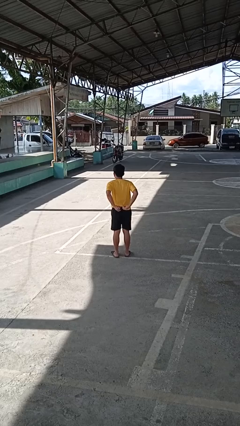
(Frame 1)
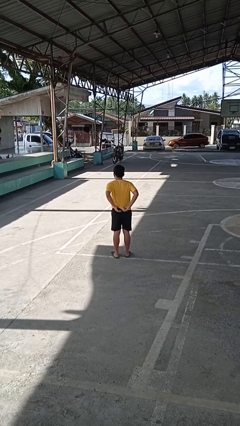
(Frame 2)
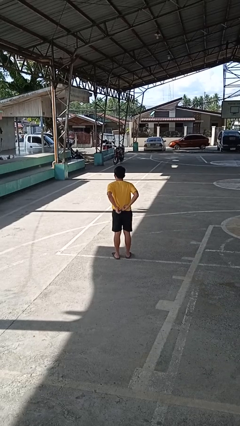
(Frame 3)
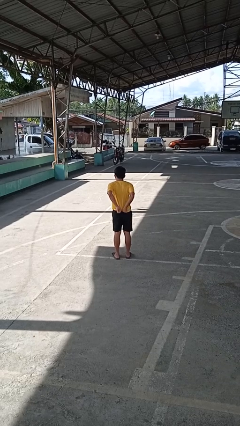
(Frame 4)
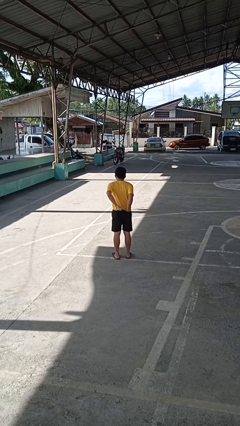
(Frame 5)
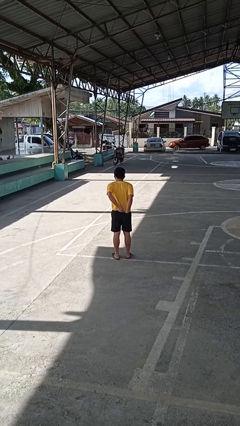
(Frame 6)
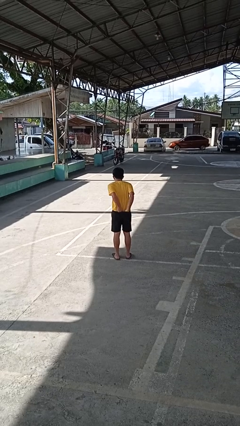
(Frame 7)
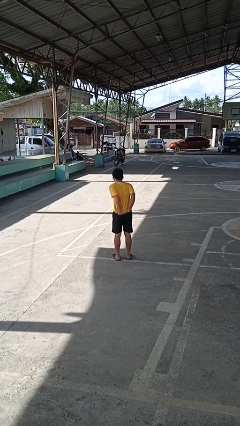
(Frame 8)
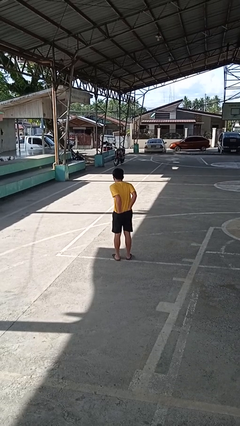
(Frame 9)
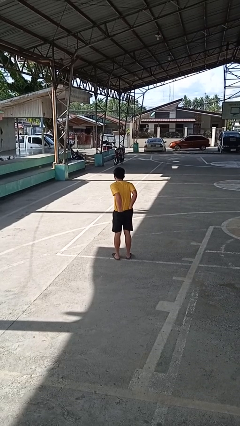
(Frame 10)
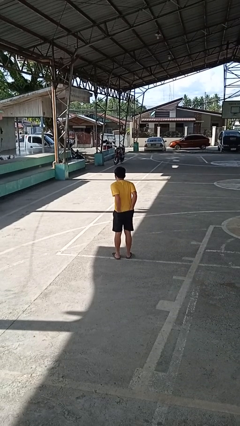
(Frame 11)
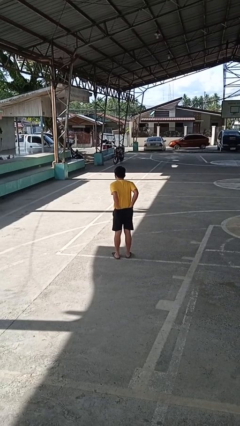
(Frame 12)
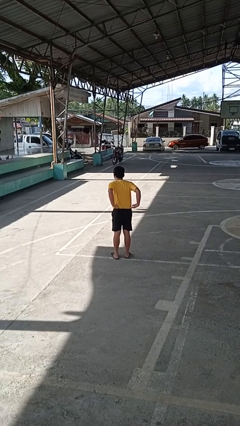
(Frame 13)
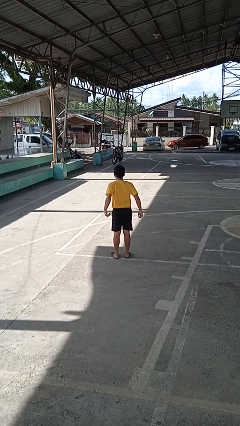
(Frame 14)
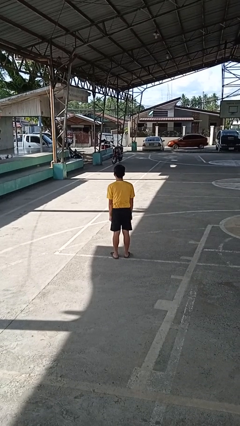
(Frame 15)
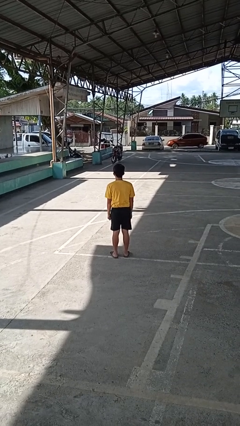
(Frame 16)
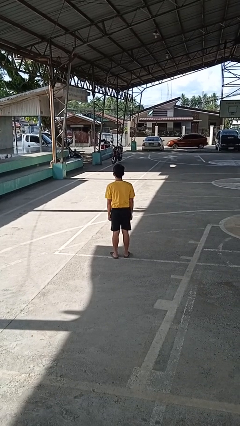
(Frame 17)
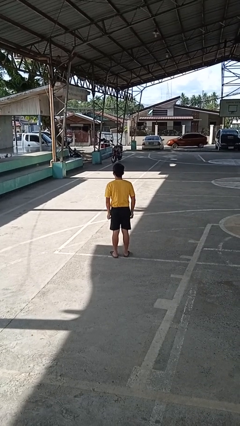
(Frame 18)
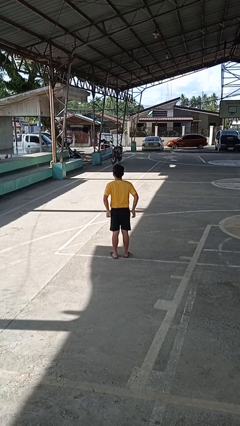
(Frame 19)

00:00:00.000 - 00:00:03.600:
person tucks in shirt

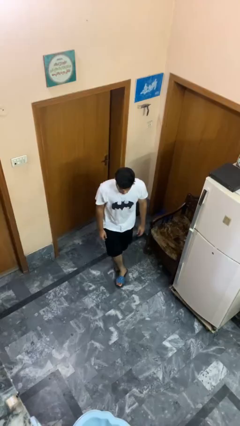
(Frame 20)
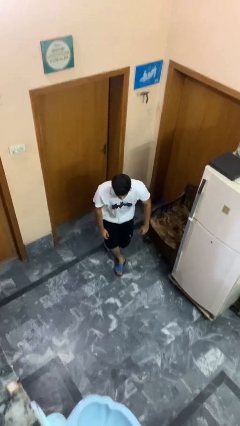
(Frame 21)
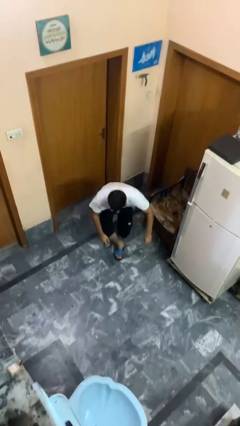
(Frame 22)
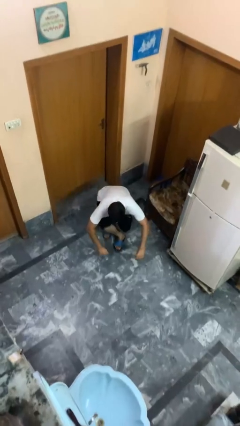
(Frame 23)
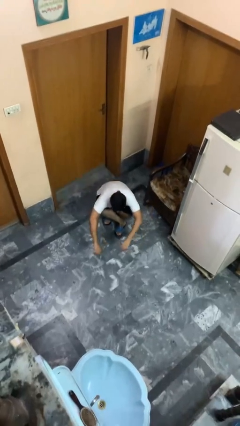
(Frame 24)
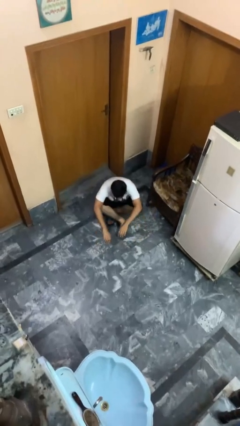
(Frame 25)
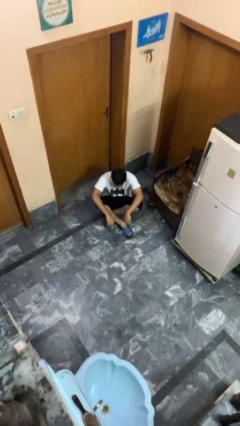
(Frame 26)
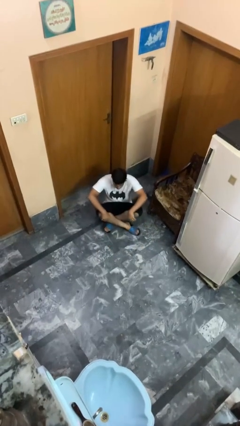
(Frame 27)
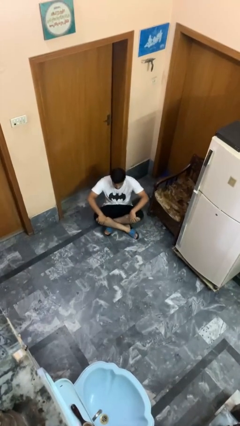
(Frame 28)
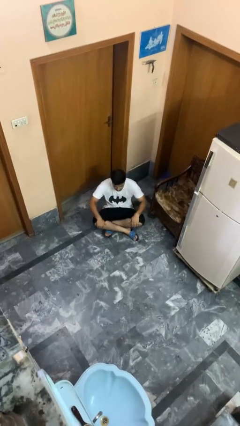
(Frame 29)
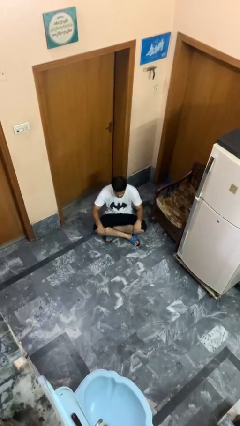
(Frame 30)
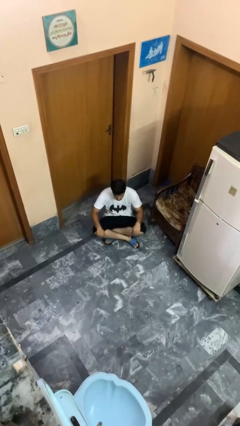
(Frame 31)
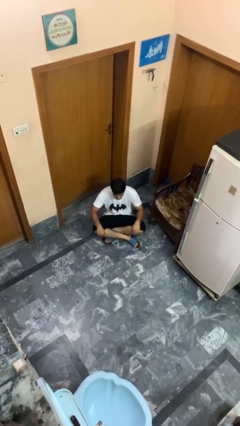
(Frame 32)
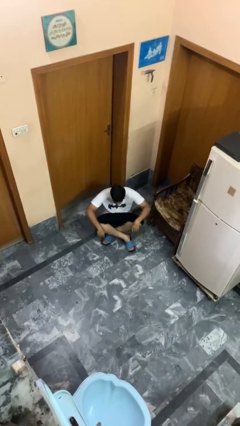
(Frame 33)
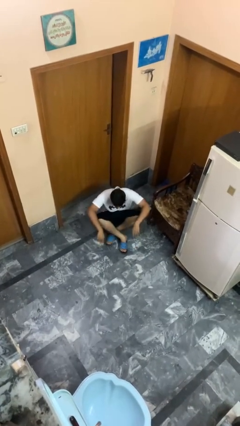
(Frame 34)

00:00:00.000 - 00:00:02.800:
person sits crisscross

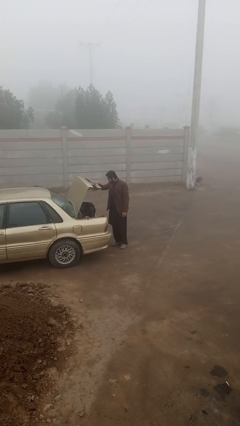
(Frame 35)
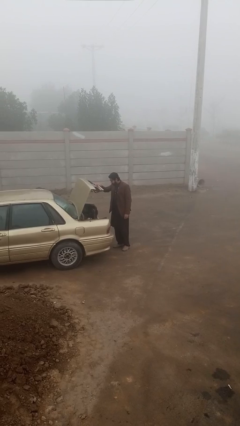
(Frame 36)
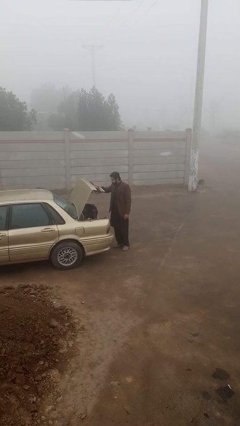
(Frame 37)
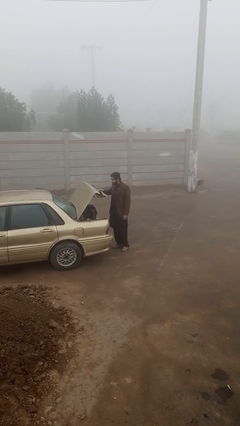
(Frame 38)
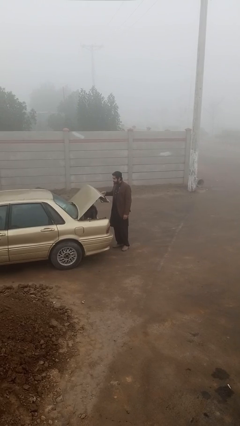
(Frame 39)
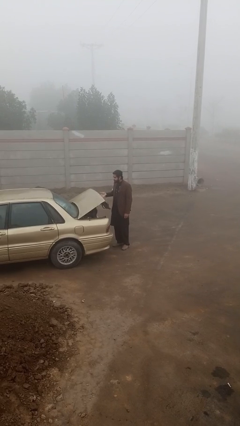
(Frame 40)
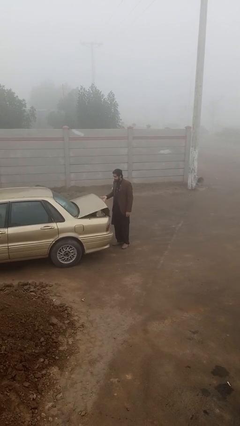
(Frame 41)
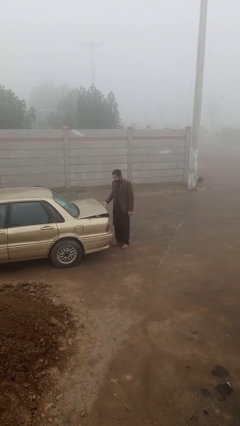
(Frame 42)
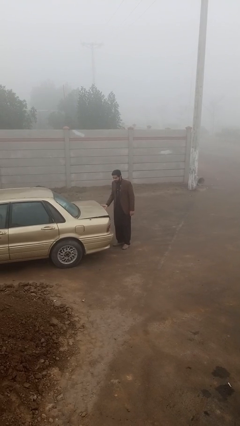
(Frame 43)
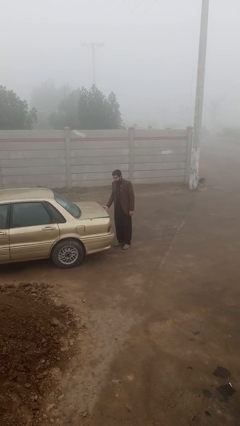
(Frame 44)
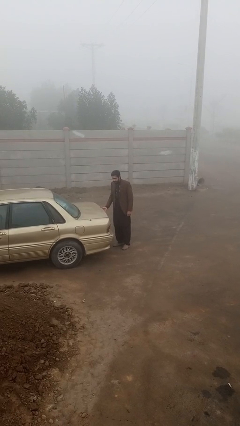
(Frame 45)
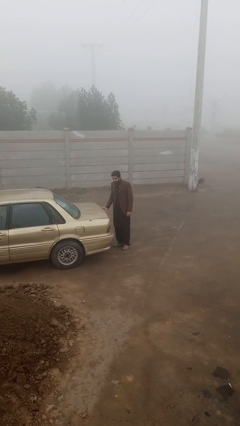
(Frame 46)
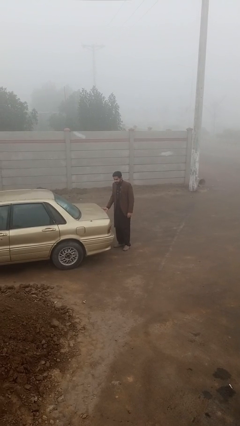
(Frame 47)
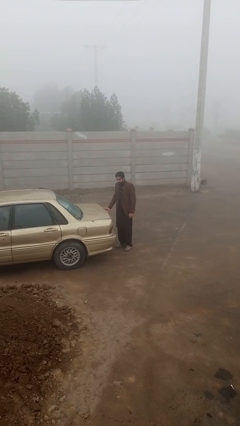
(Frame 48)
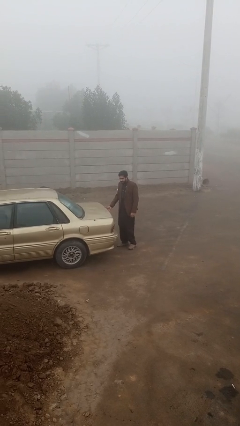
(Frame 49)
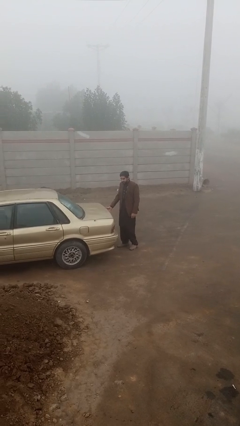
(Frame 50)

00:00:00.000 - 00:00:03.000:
person closes car trunk

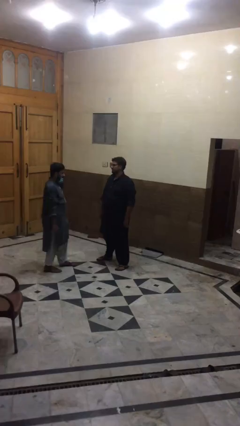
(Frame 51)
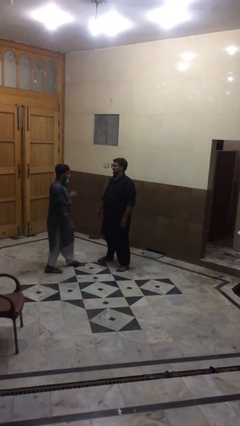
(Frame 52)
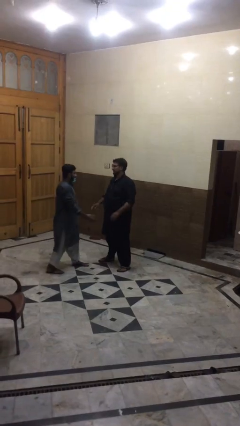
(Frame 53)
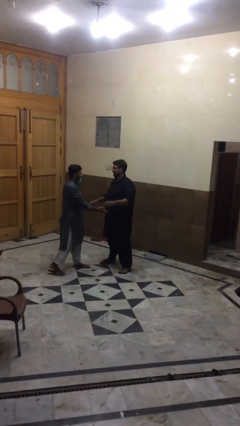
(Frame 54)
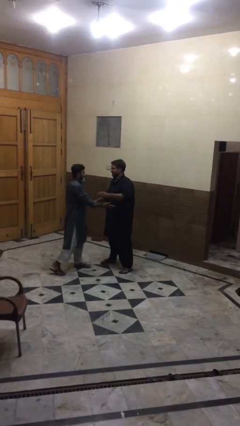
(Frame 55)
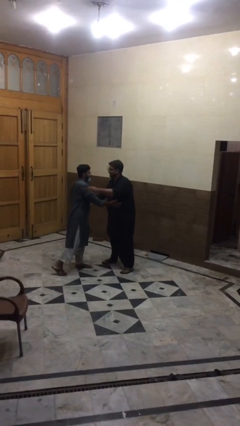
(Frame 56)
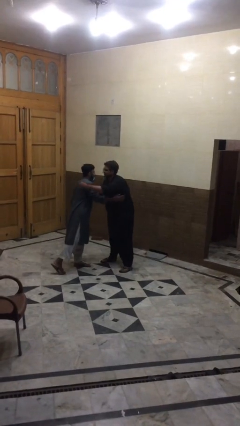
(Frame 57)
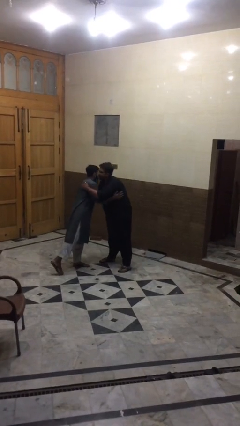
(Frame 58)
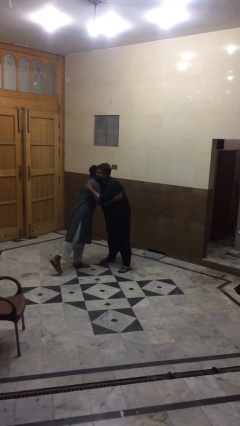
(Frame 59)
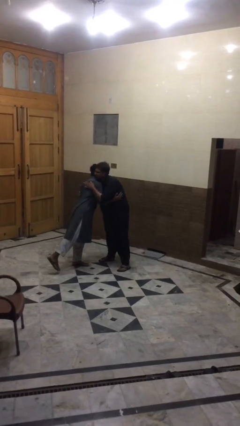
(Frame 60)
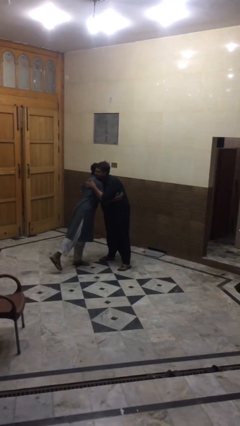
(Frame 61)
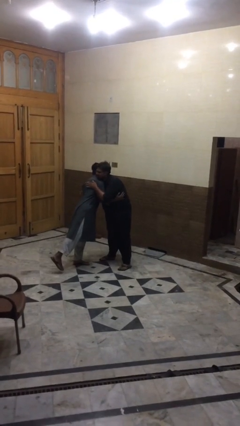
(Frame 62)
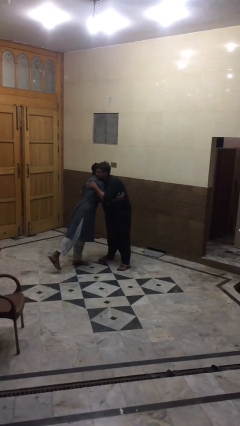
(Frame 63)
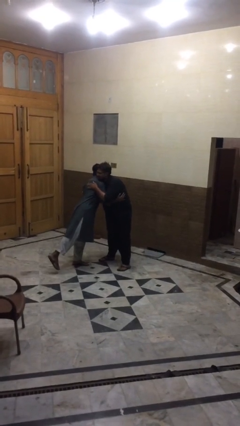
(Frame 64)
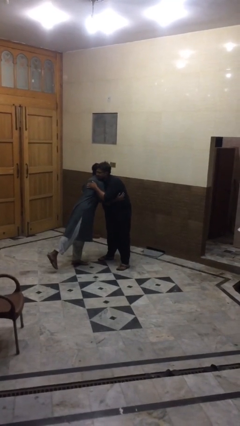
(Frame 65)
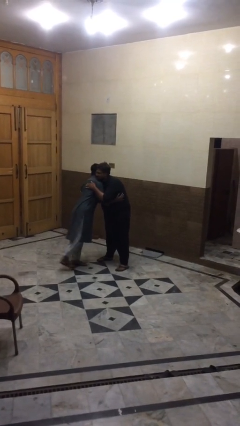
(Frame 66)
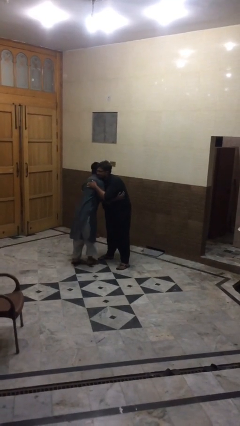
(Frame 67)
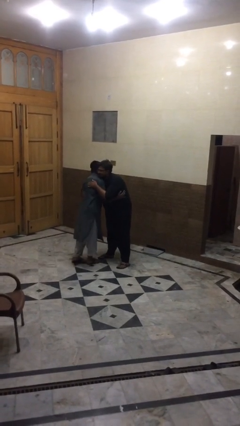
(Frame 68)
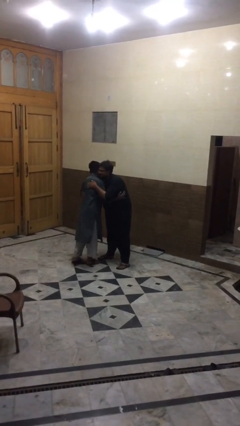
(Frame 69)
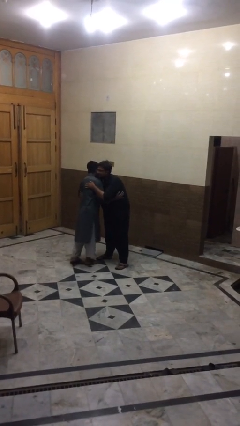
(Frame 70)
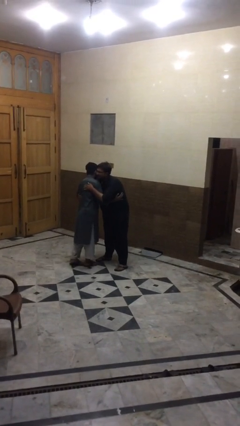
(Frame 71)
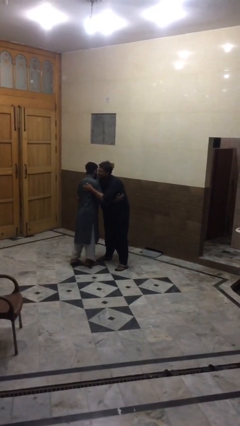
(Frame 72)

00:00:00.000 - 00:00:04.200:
person embraces person

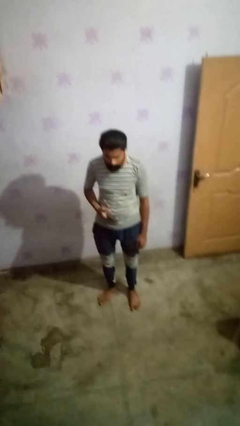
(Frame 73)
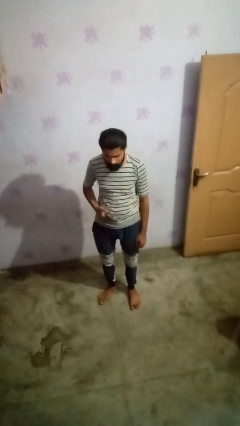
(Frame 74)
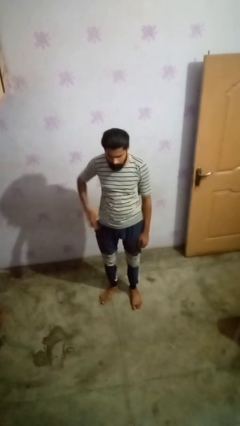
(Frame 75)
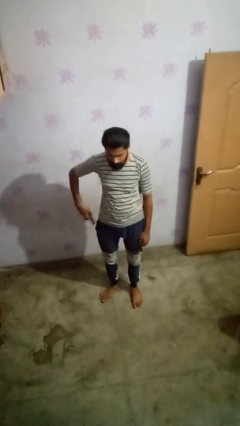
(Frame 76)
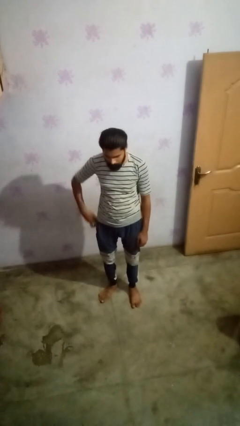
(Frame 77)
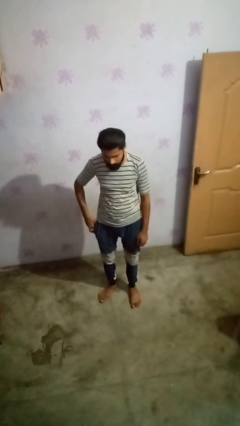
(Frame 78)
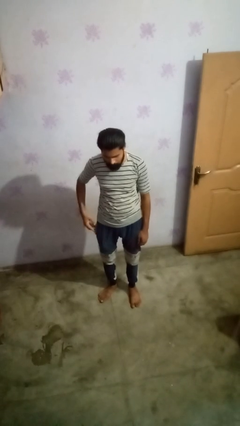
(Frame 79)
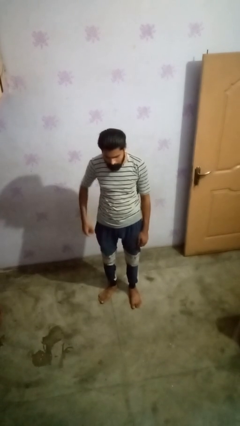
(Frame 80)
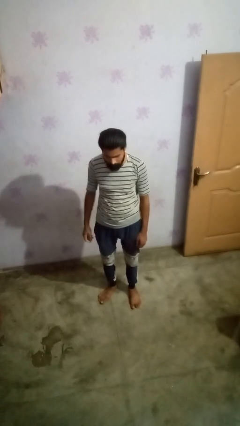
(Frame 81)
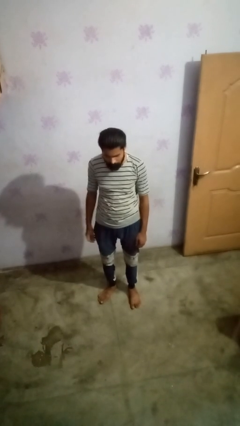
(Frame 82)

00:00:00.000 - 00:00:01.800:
person puts phone into pocket

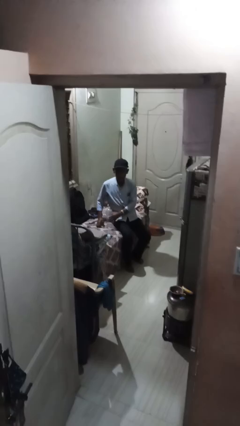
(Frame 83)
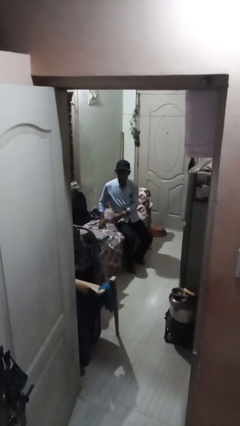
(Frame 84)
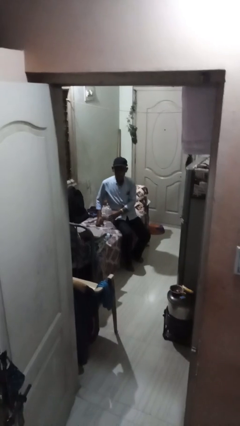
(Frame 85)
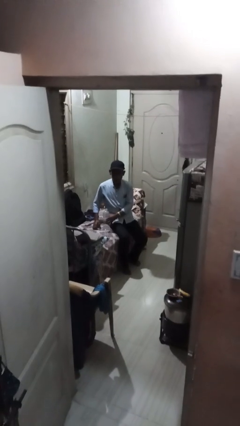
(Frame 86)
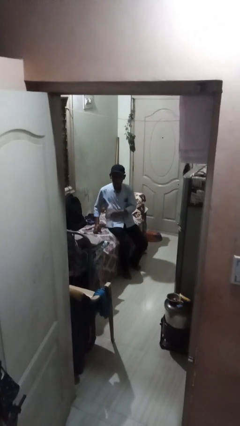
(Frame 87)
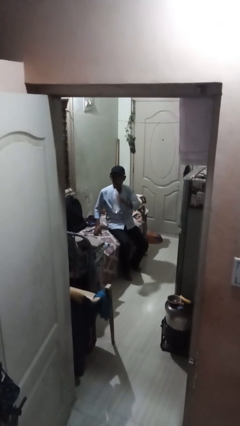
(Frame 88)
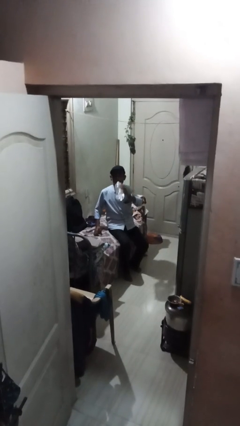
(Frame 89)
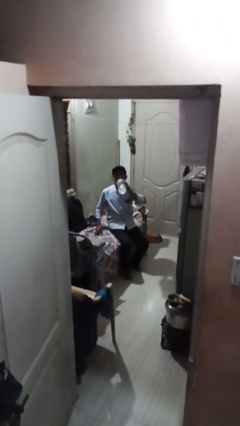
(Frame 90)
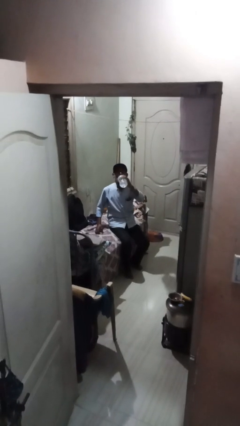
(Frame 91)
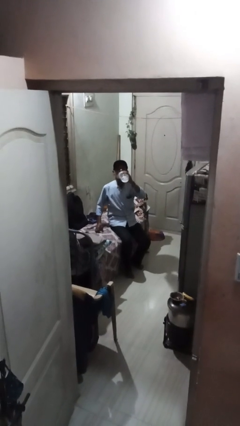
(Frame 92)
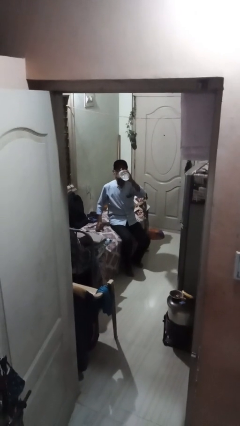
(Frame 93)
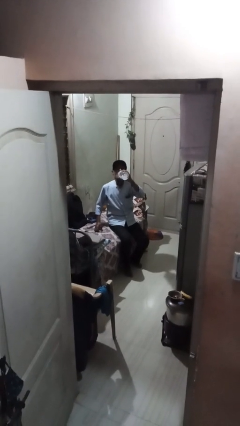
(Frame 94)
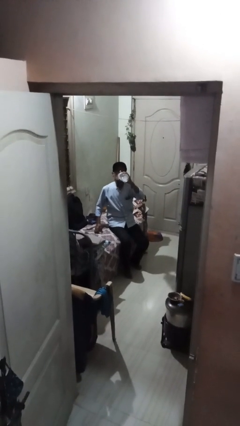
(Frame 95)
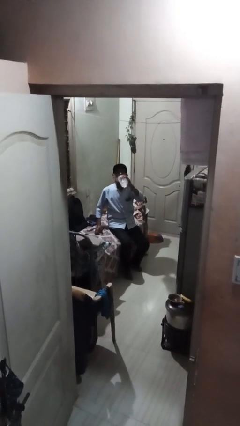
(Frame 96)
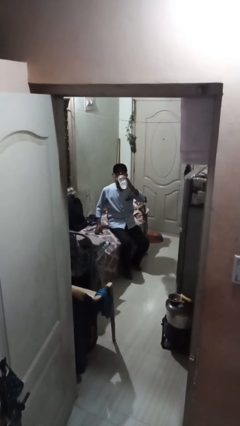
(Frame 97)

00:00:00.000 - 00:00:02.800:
person drinks from bottle
